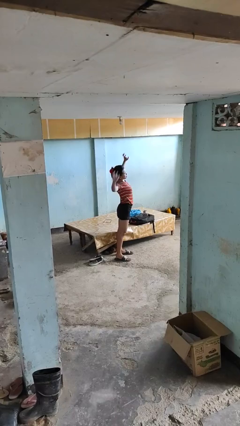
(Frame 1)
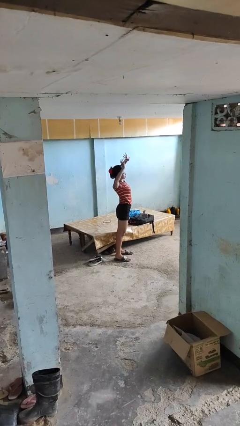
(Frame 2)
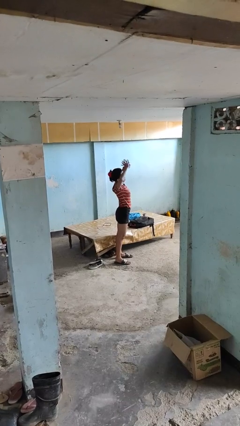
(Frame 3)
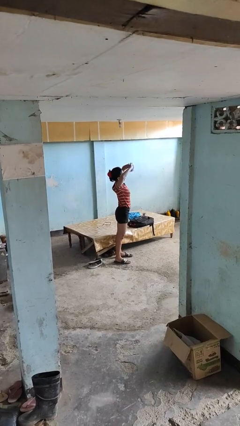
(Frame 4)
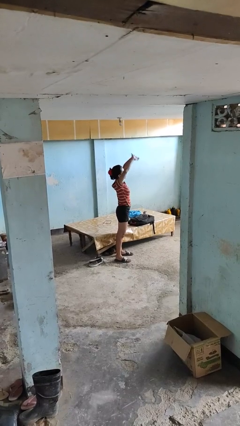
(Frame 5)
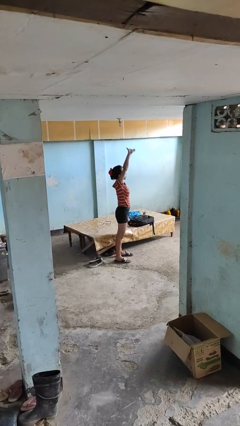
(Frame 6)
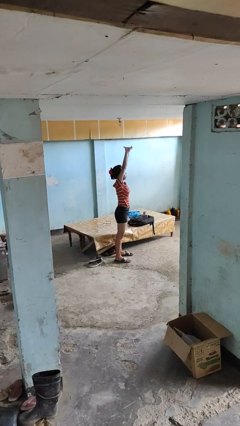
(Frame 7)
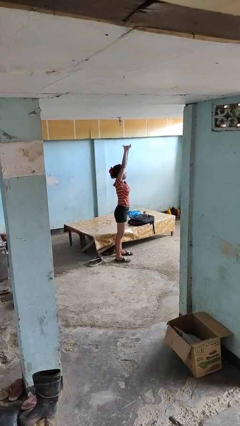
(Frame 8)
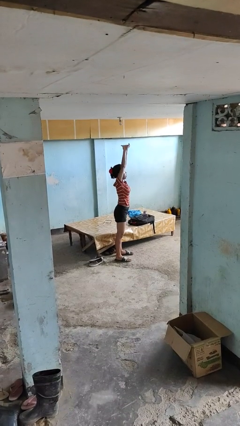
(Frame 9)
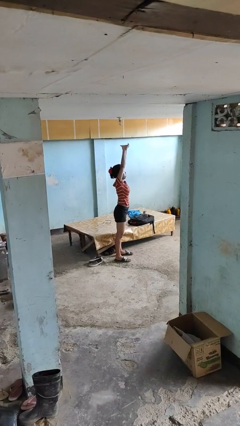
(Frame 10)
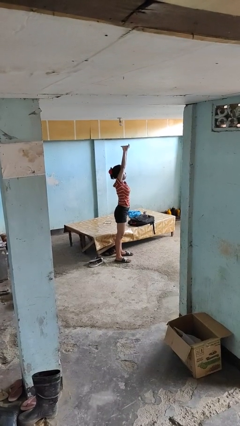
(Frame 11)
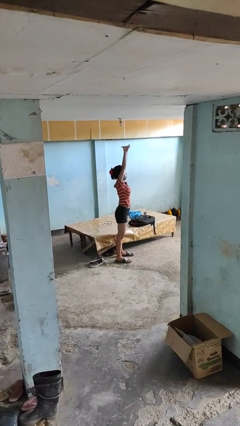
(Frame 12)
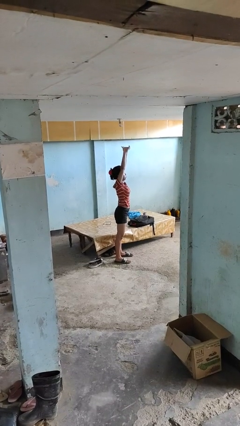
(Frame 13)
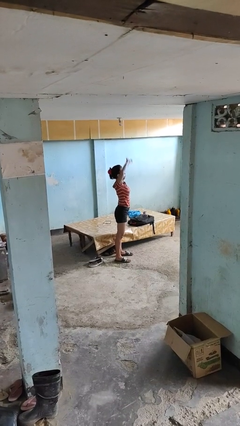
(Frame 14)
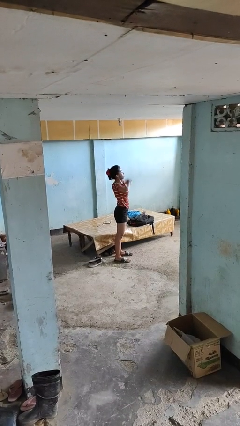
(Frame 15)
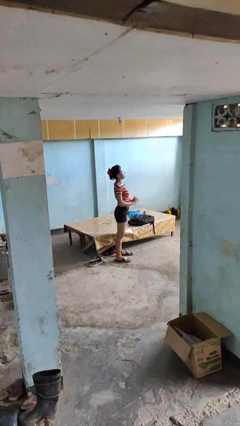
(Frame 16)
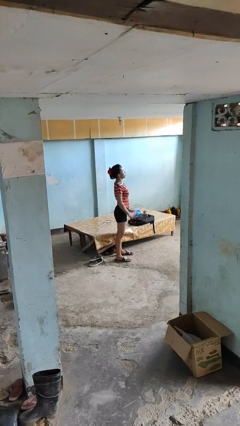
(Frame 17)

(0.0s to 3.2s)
person stretches arms over head

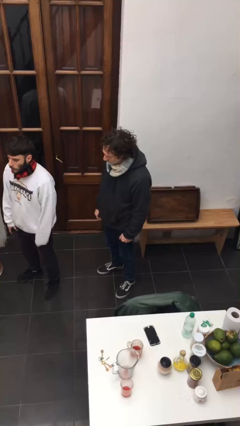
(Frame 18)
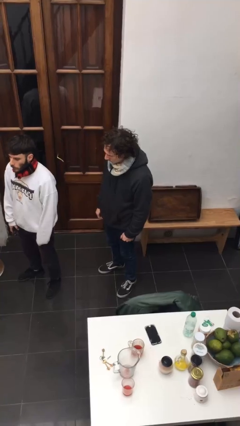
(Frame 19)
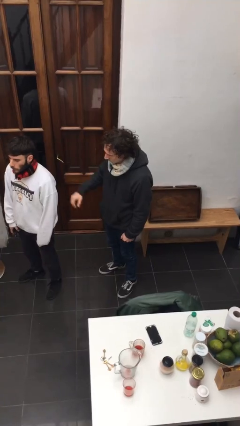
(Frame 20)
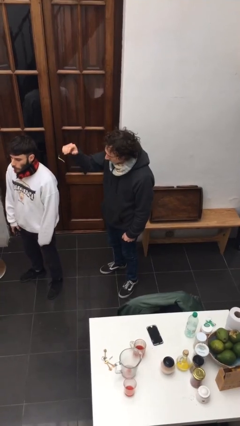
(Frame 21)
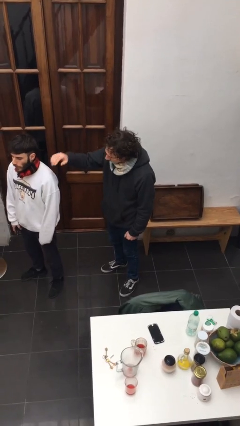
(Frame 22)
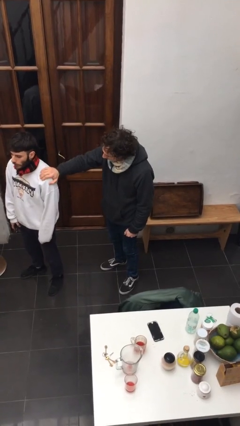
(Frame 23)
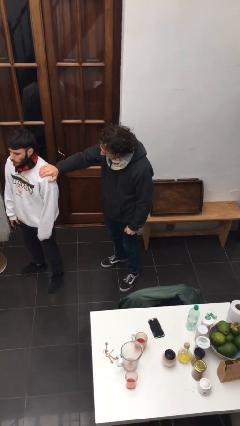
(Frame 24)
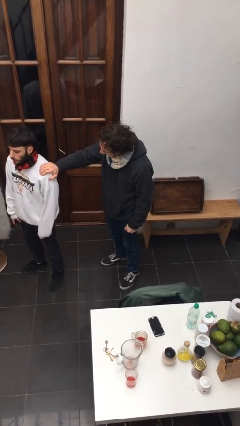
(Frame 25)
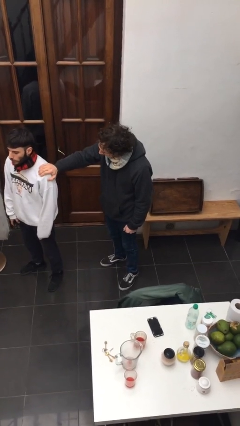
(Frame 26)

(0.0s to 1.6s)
person grabs person by shoulder

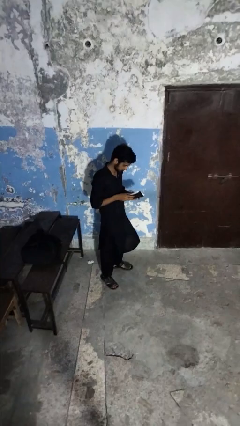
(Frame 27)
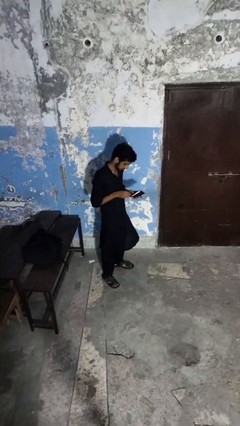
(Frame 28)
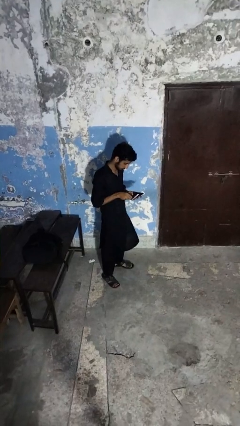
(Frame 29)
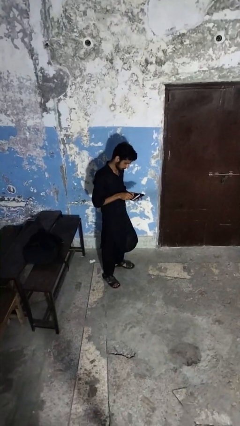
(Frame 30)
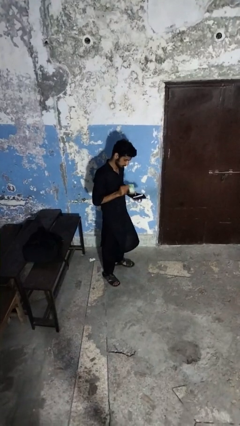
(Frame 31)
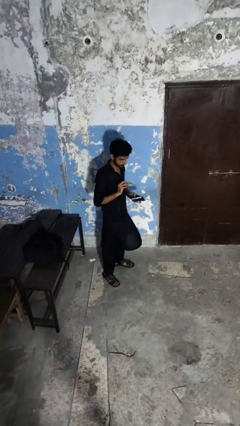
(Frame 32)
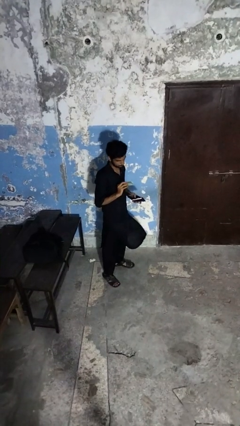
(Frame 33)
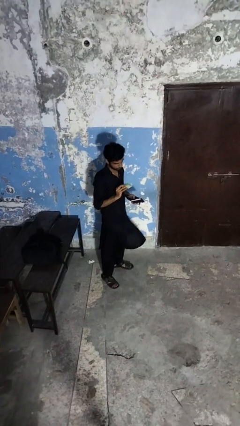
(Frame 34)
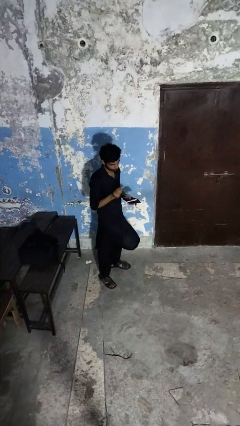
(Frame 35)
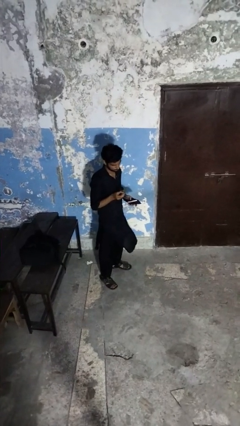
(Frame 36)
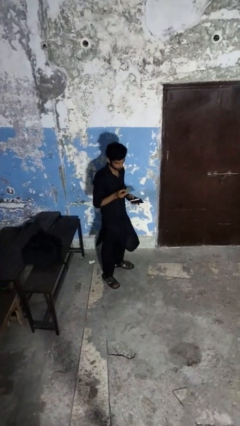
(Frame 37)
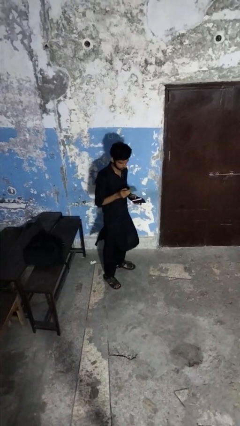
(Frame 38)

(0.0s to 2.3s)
person takes object from purse

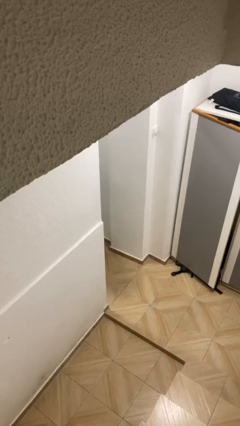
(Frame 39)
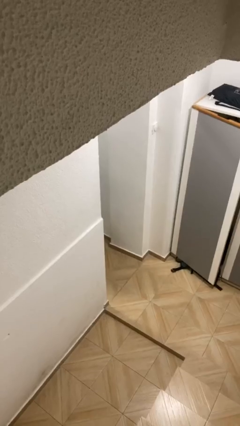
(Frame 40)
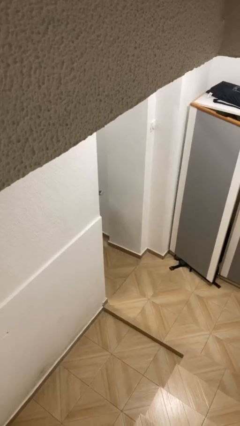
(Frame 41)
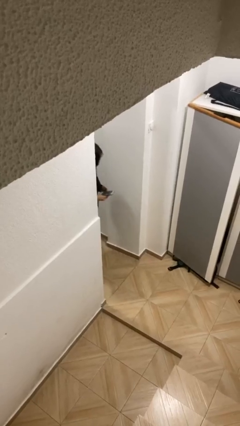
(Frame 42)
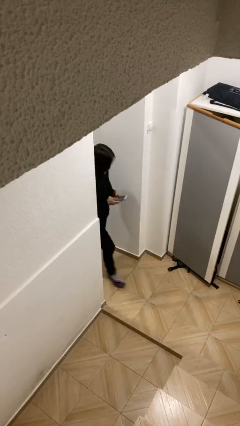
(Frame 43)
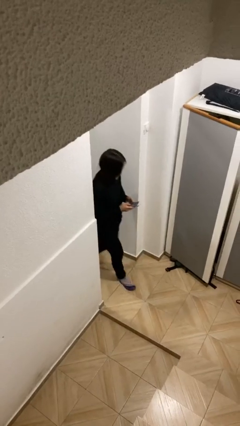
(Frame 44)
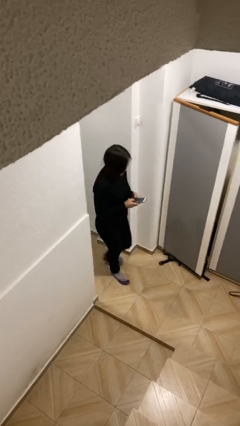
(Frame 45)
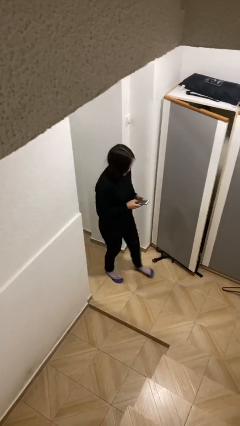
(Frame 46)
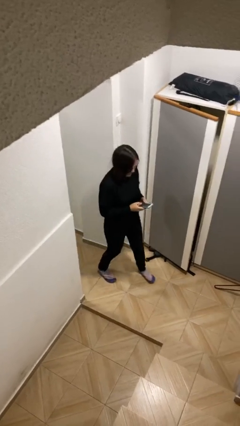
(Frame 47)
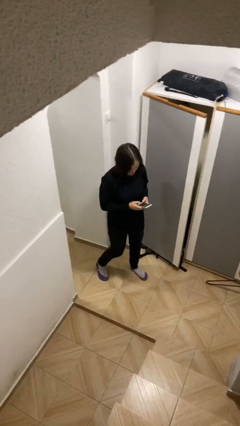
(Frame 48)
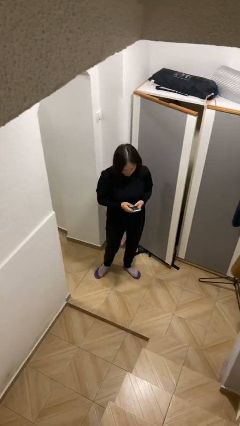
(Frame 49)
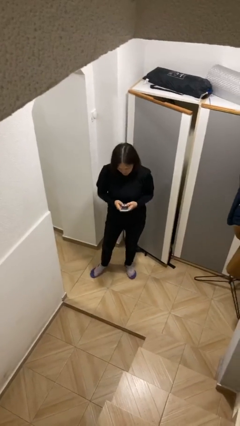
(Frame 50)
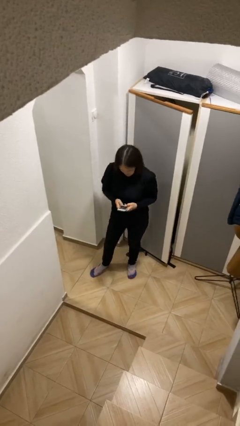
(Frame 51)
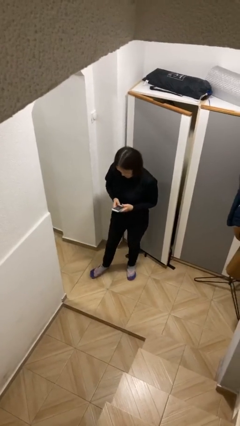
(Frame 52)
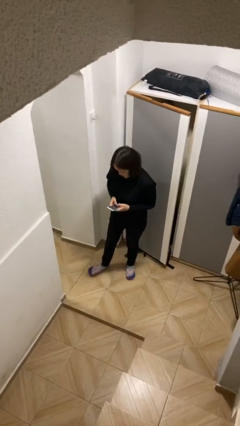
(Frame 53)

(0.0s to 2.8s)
person enters scene through structure

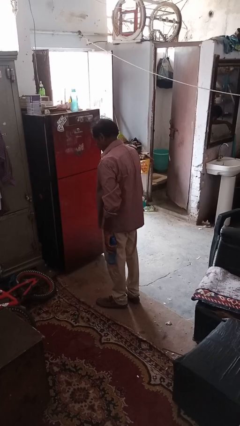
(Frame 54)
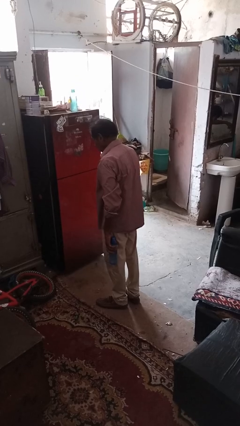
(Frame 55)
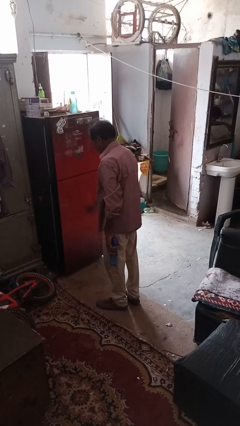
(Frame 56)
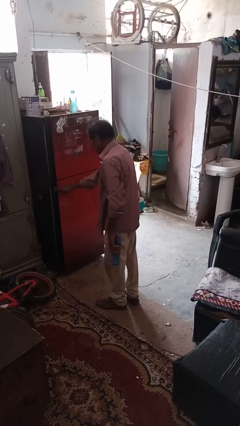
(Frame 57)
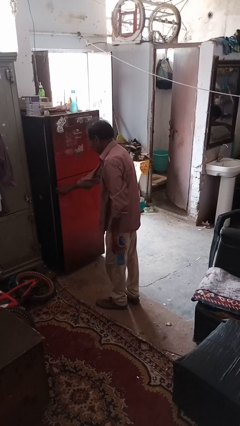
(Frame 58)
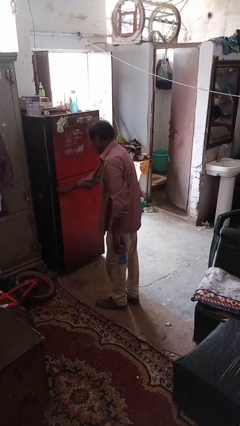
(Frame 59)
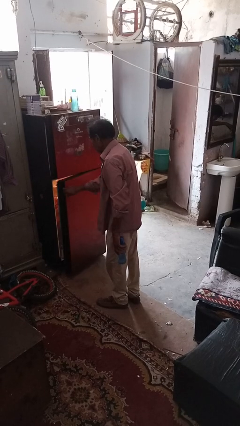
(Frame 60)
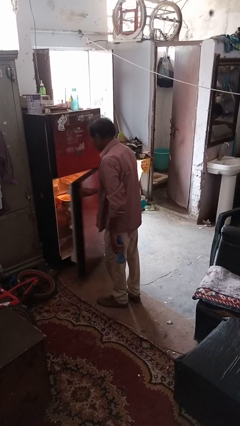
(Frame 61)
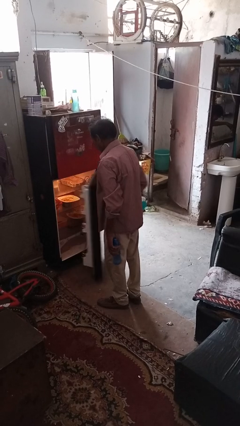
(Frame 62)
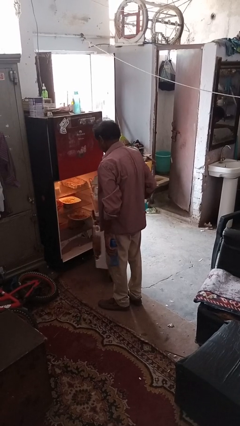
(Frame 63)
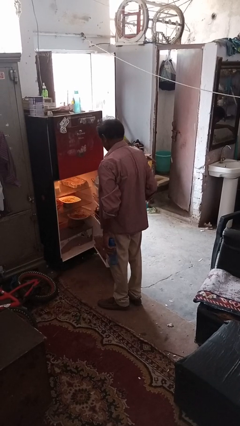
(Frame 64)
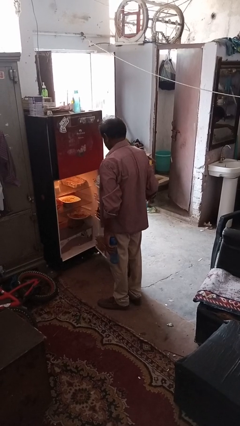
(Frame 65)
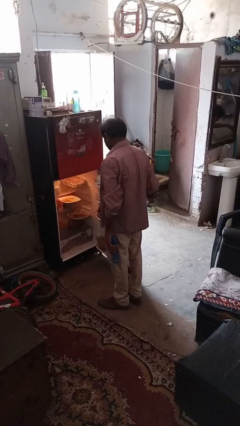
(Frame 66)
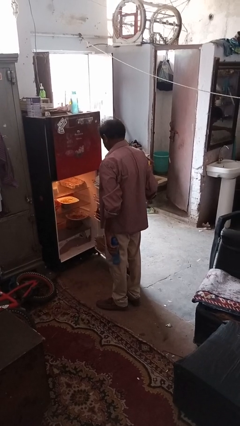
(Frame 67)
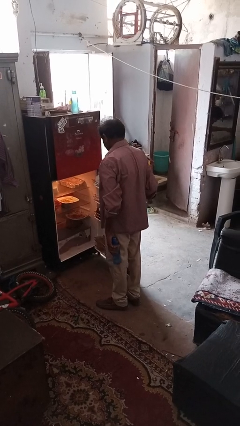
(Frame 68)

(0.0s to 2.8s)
person opens refrigerator

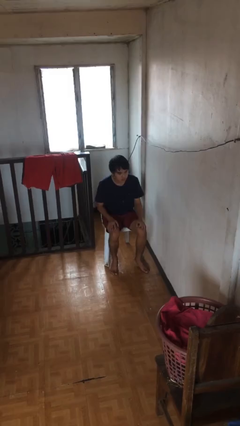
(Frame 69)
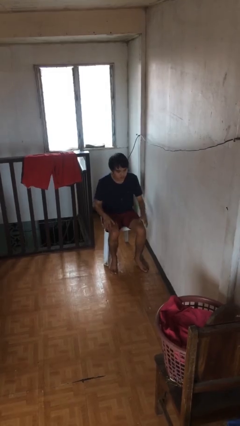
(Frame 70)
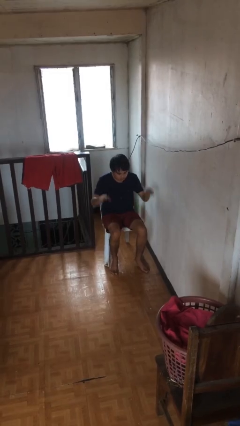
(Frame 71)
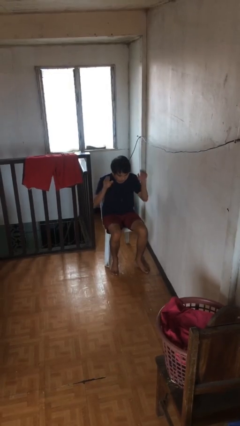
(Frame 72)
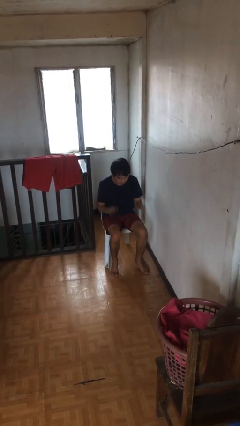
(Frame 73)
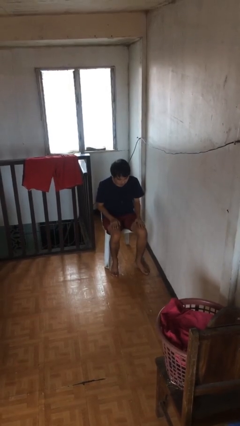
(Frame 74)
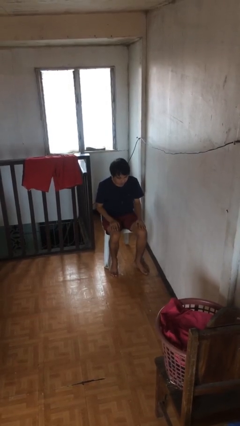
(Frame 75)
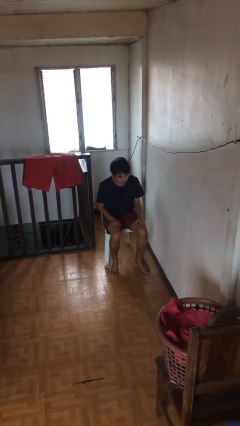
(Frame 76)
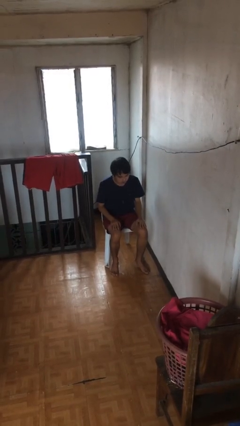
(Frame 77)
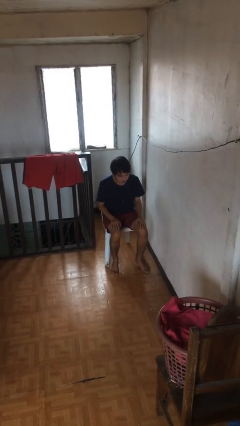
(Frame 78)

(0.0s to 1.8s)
person slaps hands on thighs

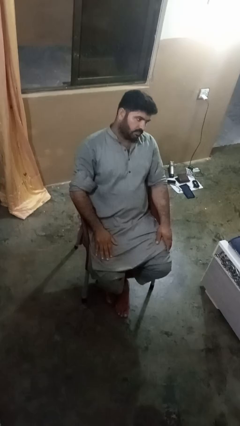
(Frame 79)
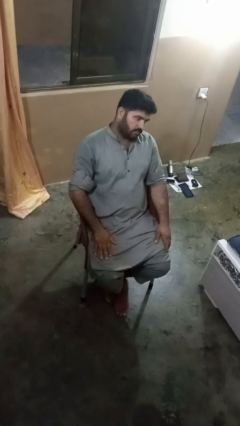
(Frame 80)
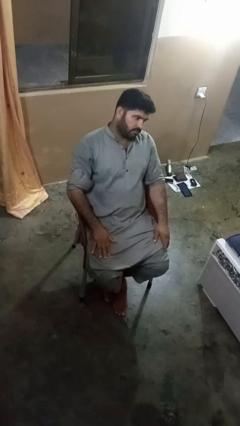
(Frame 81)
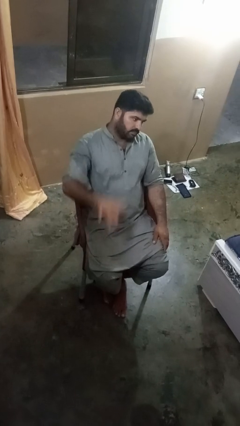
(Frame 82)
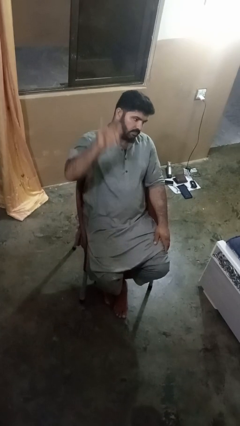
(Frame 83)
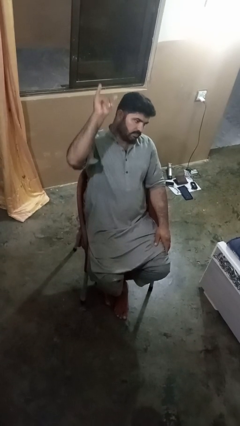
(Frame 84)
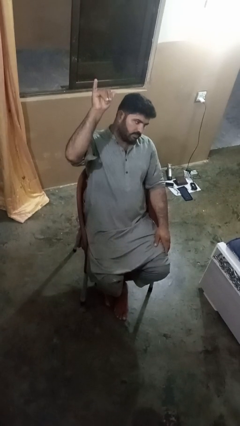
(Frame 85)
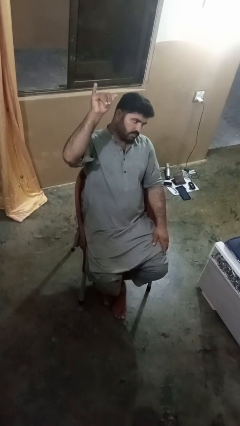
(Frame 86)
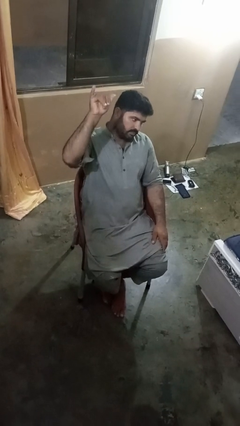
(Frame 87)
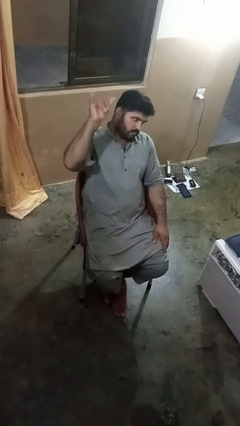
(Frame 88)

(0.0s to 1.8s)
person gestures hang loose

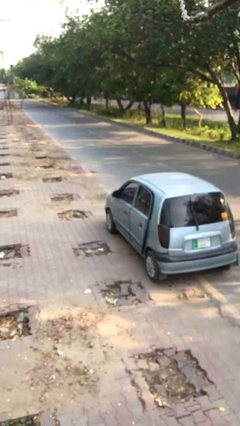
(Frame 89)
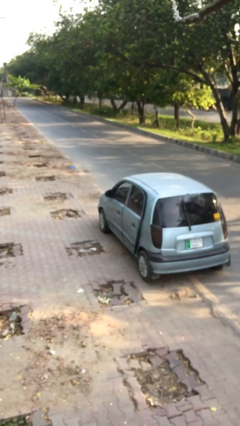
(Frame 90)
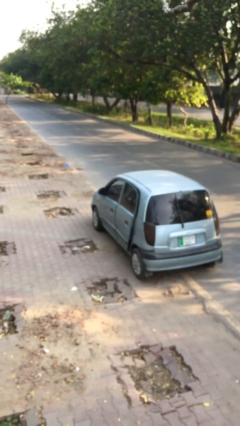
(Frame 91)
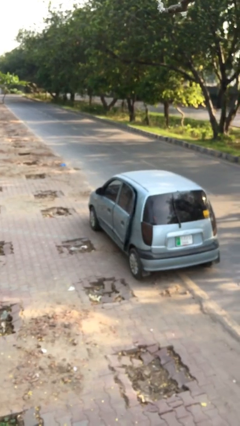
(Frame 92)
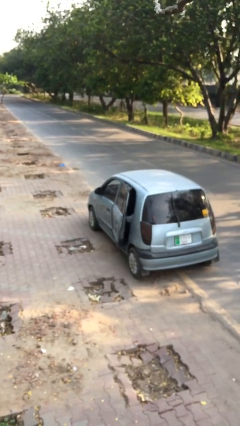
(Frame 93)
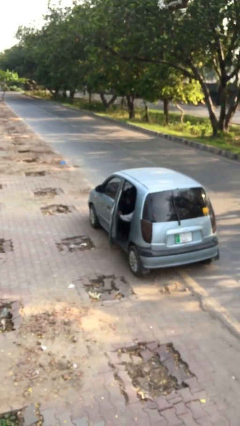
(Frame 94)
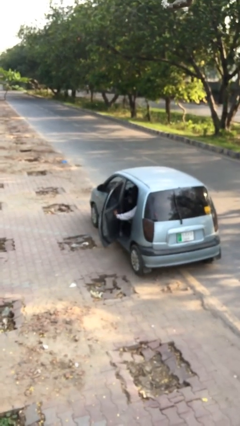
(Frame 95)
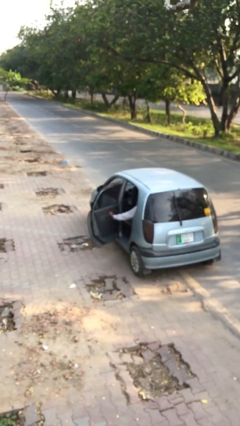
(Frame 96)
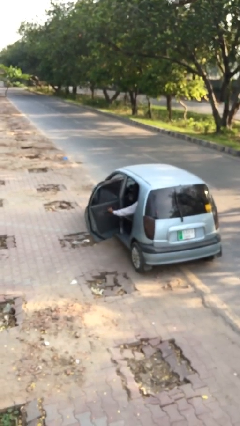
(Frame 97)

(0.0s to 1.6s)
person opens car door
